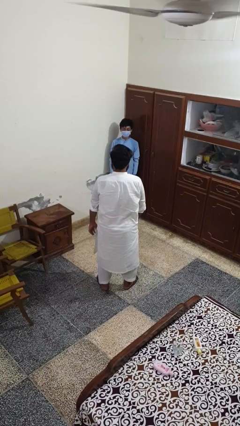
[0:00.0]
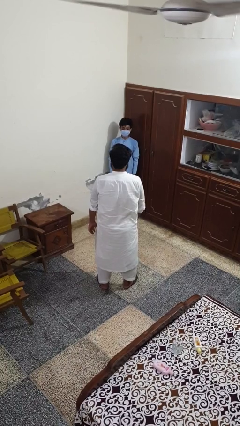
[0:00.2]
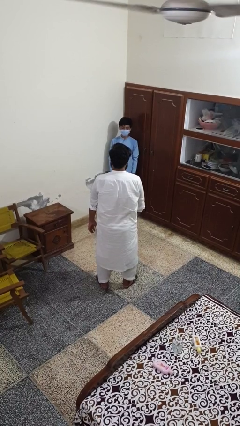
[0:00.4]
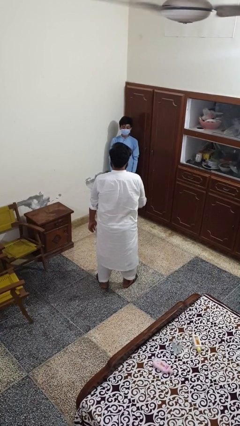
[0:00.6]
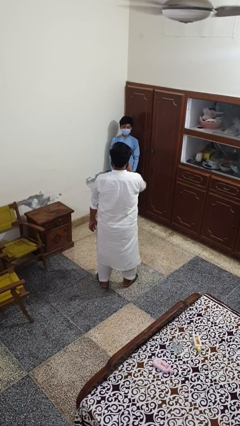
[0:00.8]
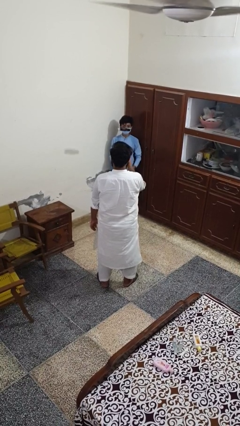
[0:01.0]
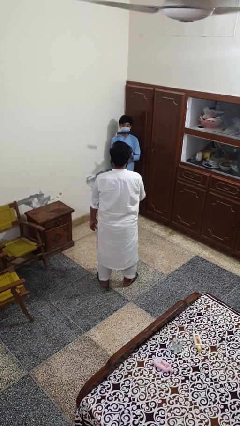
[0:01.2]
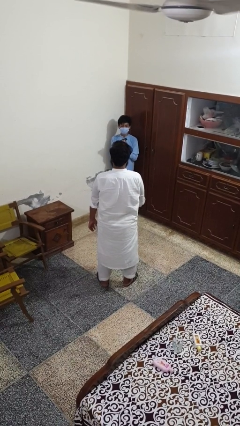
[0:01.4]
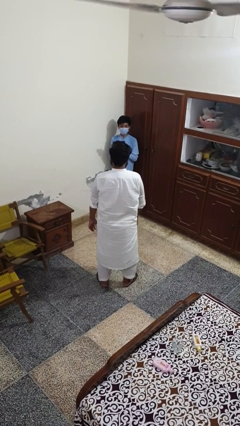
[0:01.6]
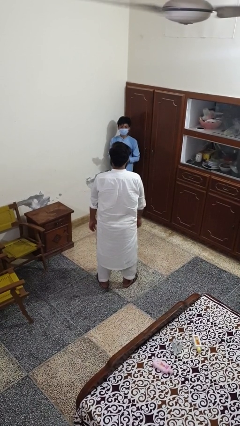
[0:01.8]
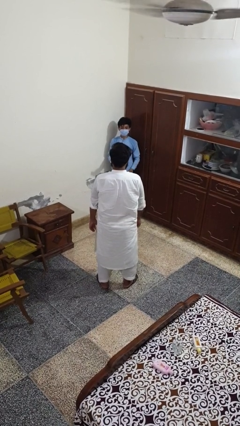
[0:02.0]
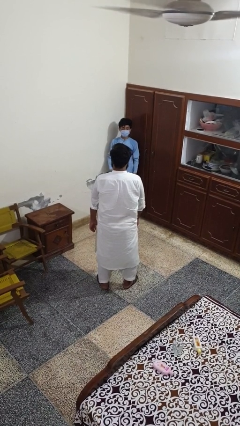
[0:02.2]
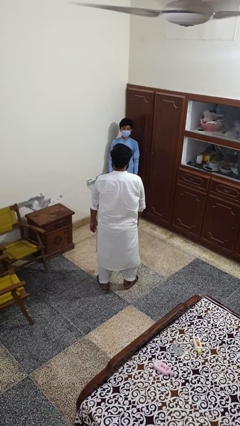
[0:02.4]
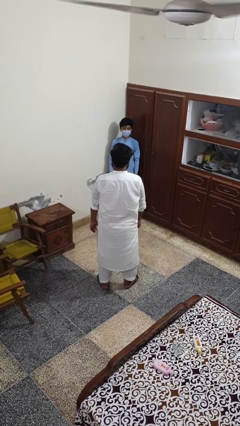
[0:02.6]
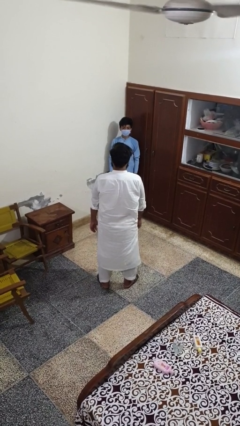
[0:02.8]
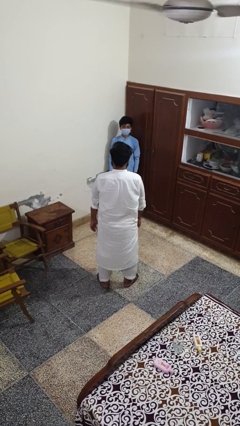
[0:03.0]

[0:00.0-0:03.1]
person throws object to person

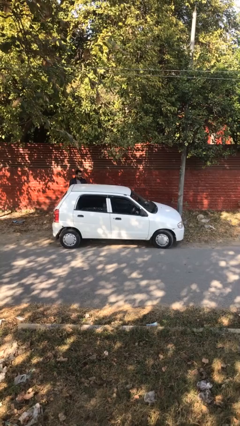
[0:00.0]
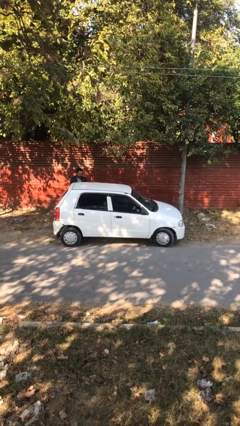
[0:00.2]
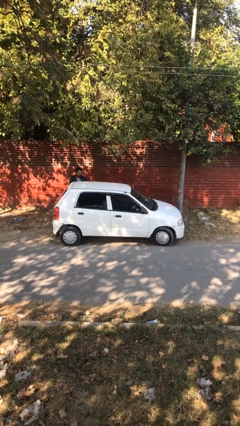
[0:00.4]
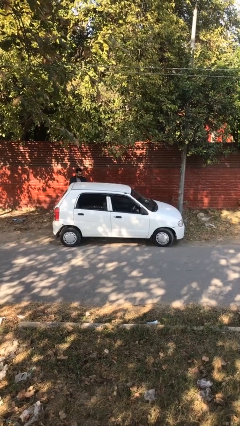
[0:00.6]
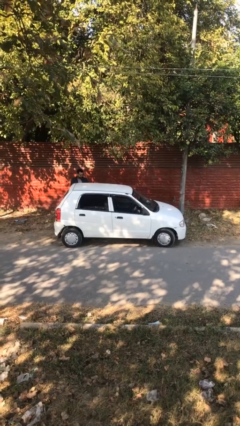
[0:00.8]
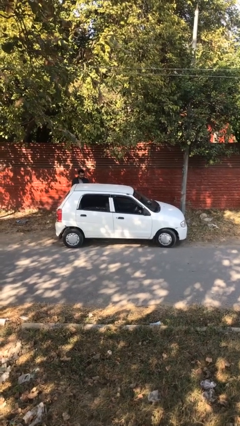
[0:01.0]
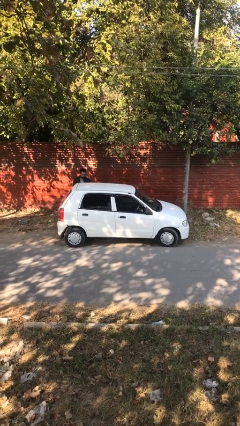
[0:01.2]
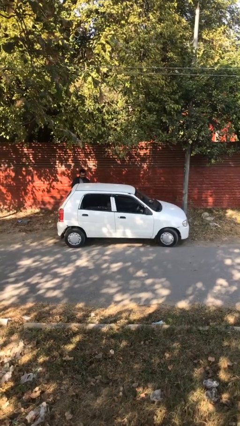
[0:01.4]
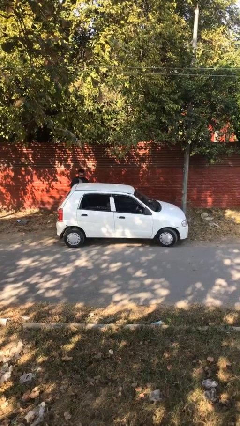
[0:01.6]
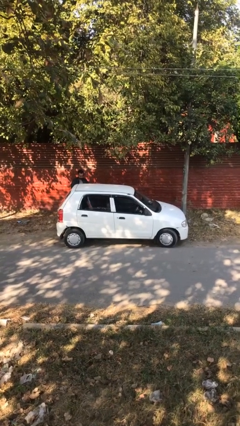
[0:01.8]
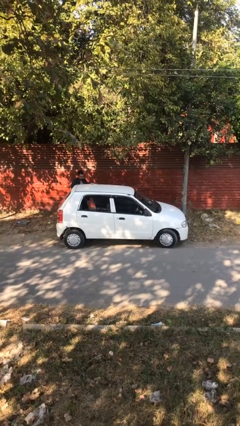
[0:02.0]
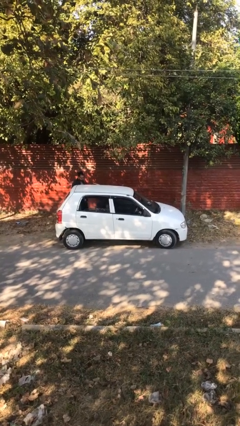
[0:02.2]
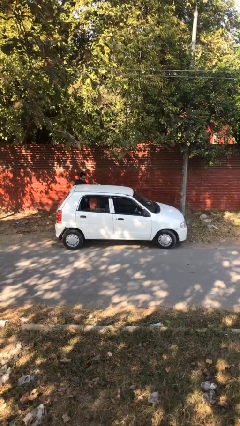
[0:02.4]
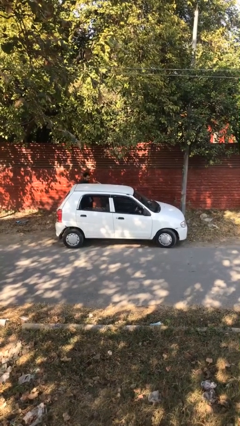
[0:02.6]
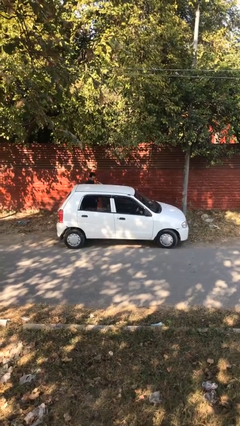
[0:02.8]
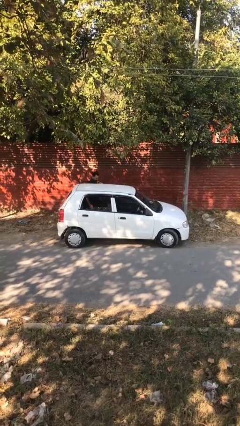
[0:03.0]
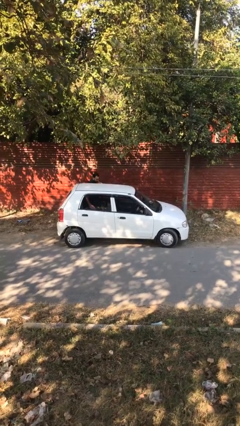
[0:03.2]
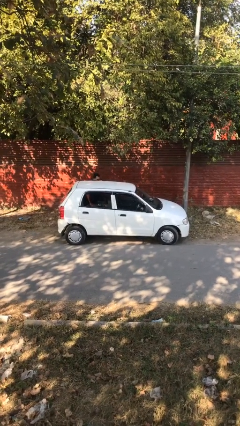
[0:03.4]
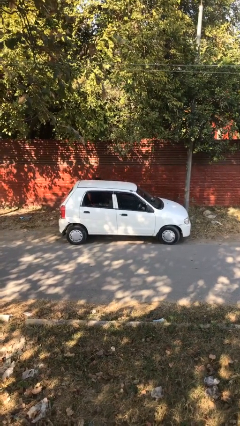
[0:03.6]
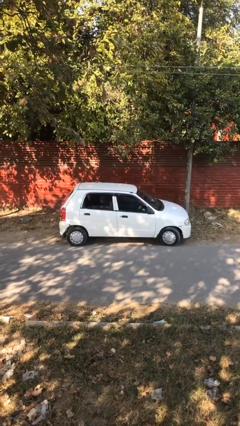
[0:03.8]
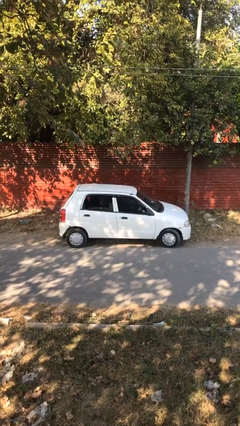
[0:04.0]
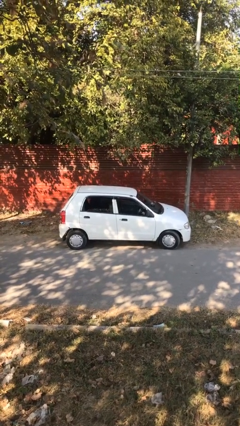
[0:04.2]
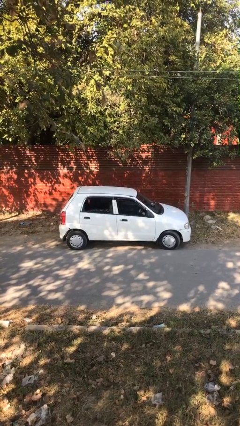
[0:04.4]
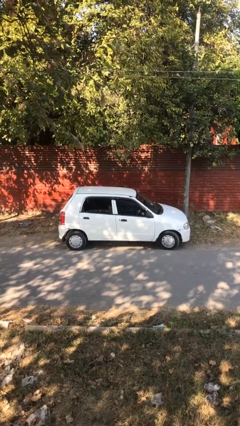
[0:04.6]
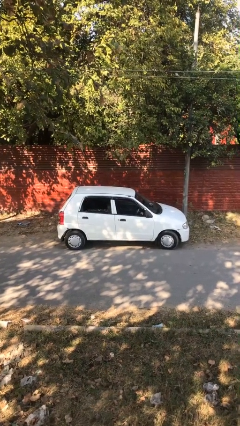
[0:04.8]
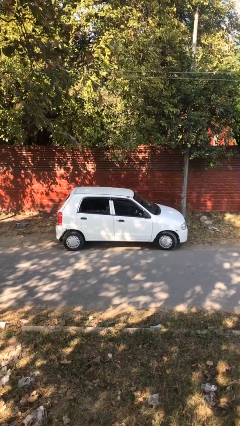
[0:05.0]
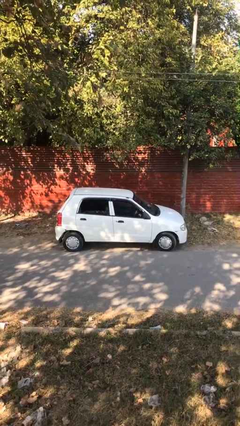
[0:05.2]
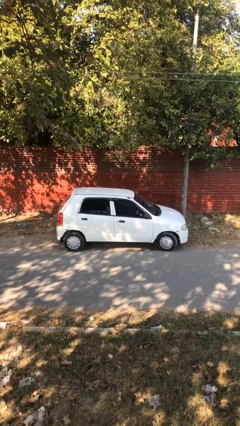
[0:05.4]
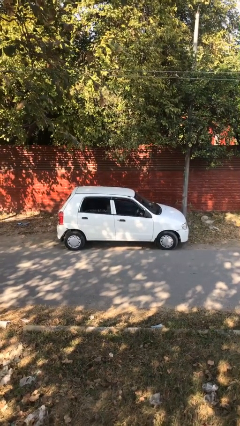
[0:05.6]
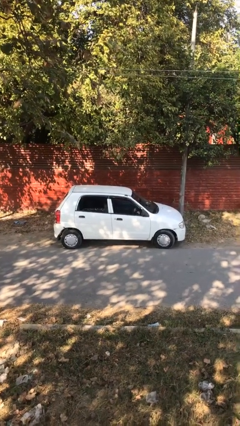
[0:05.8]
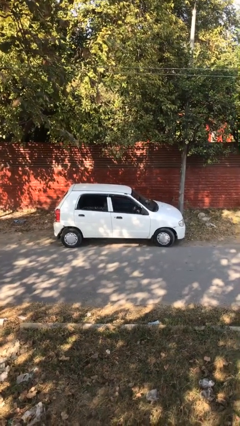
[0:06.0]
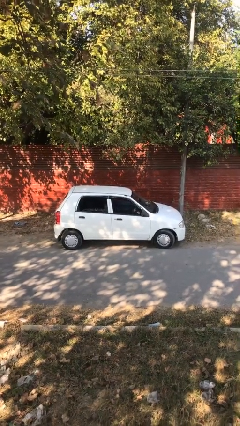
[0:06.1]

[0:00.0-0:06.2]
car picks up person

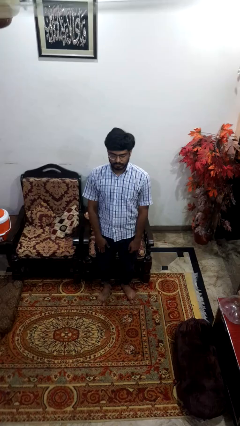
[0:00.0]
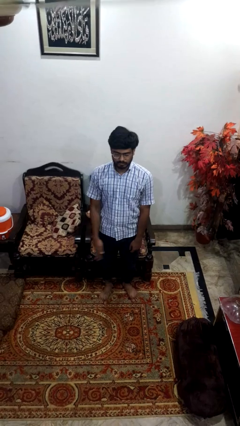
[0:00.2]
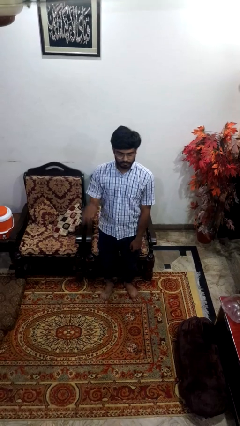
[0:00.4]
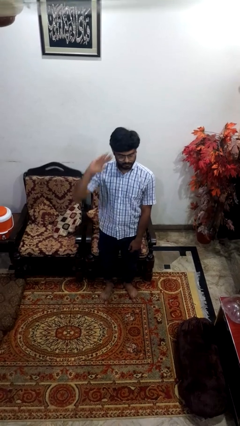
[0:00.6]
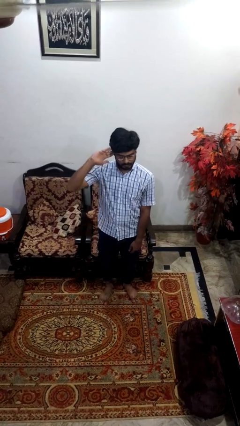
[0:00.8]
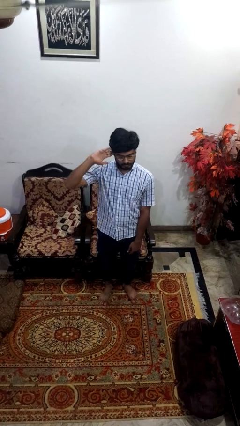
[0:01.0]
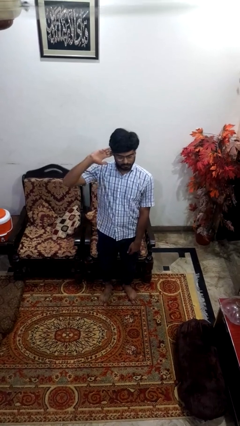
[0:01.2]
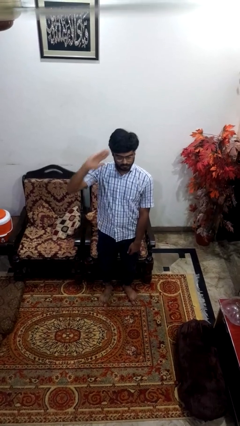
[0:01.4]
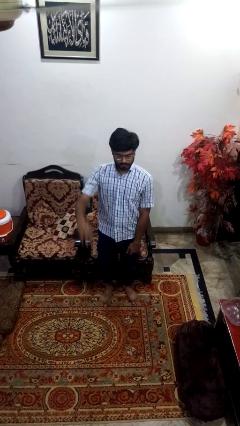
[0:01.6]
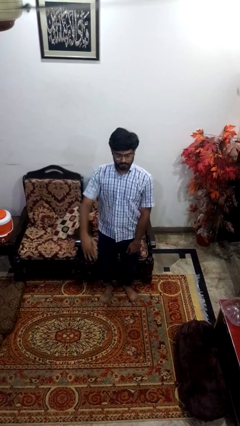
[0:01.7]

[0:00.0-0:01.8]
person salutes

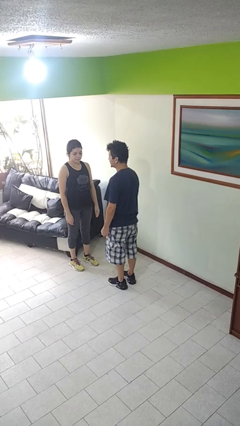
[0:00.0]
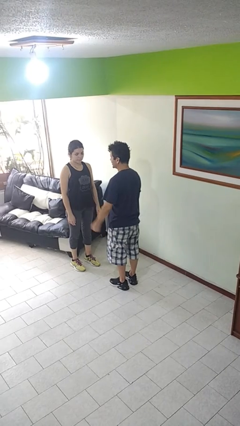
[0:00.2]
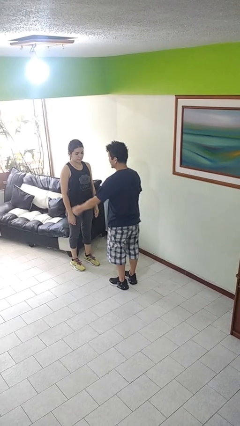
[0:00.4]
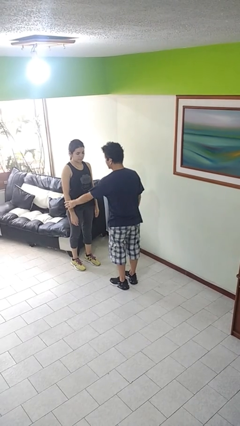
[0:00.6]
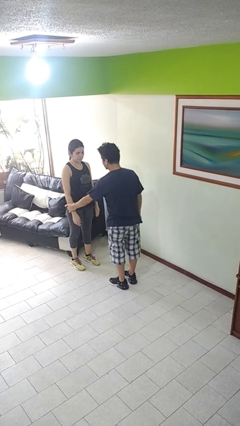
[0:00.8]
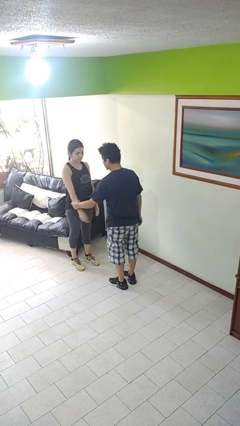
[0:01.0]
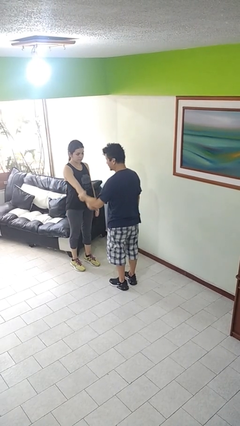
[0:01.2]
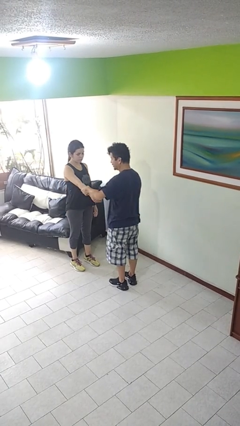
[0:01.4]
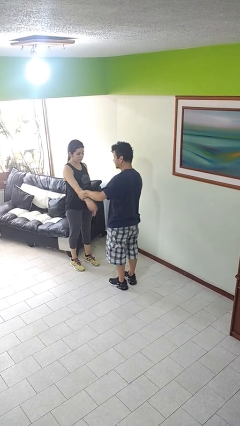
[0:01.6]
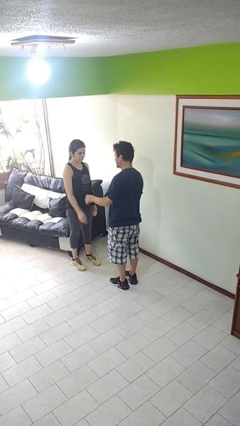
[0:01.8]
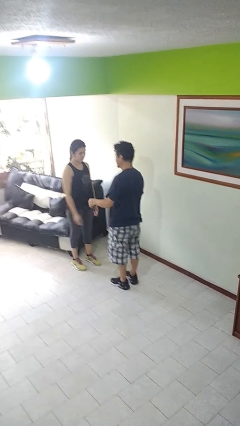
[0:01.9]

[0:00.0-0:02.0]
person grabs person by forearm

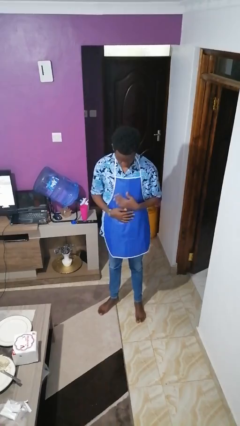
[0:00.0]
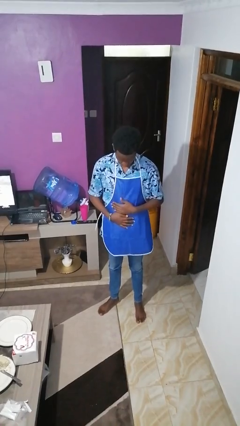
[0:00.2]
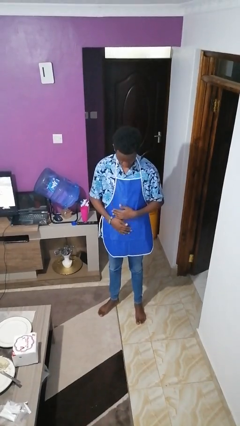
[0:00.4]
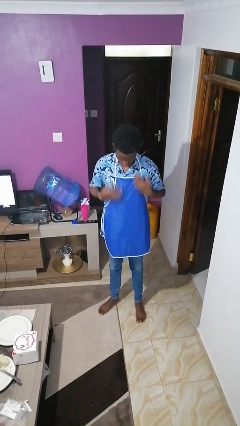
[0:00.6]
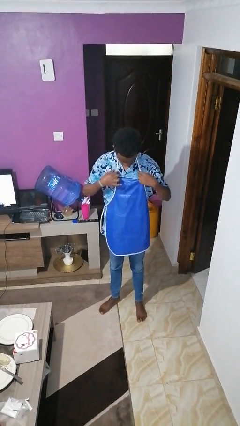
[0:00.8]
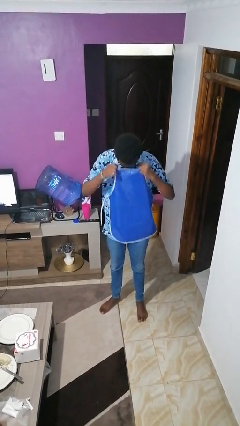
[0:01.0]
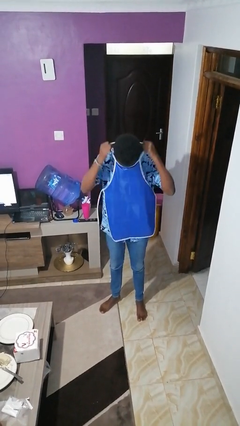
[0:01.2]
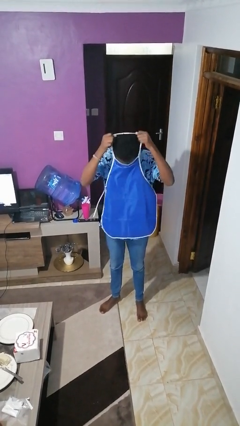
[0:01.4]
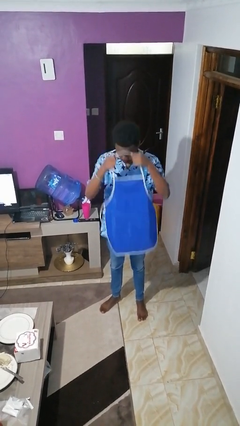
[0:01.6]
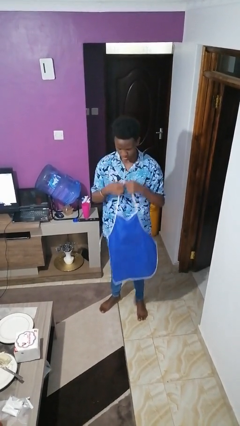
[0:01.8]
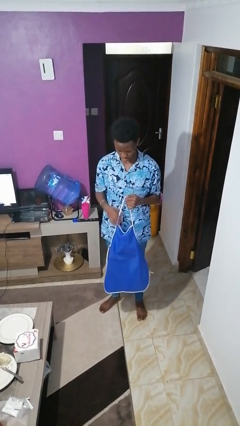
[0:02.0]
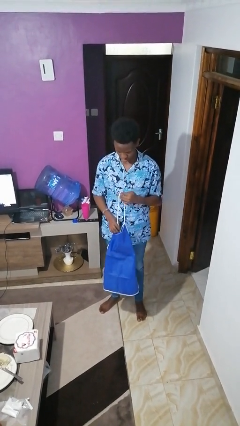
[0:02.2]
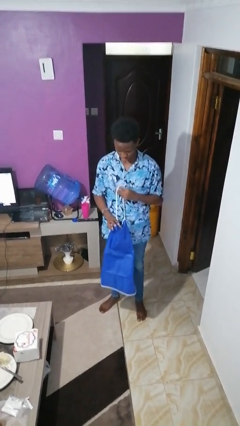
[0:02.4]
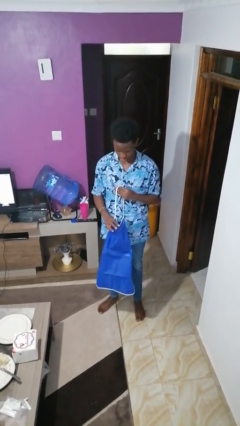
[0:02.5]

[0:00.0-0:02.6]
person takes off apron

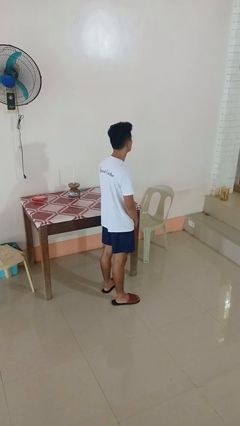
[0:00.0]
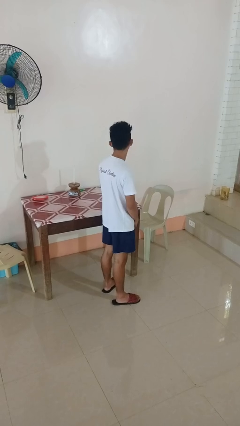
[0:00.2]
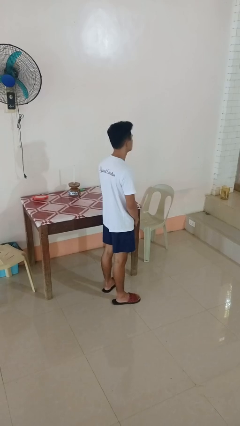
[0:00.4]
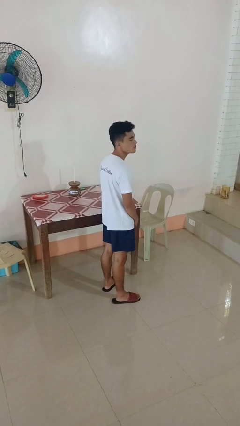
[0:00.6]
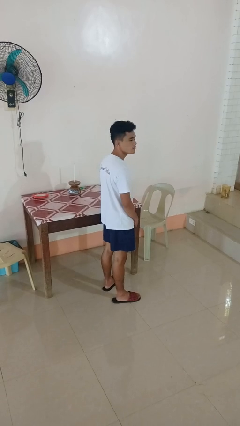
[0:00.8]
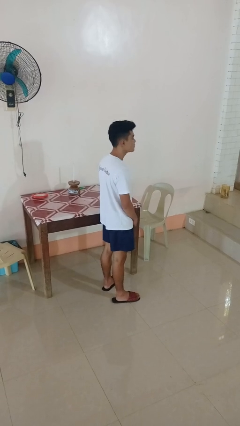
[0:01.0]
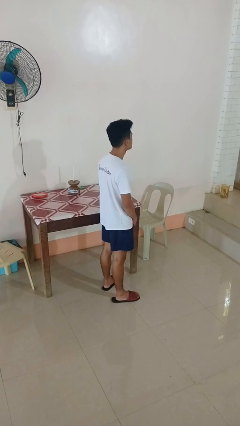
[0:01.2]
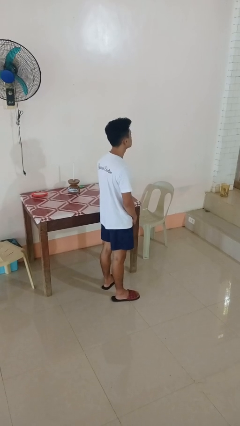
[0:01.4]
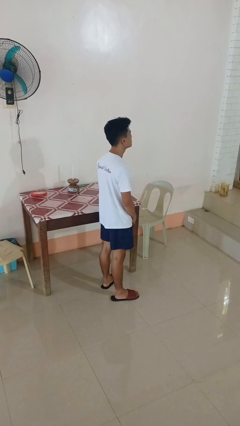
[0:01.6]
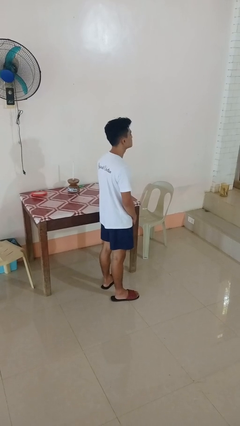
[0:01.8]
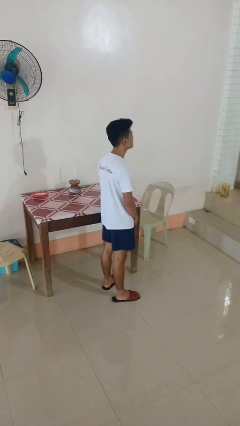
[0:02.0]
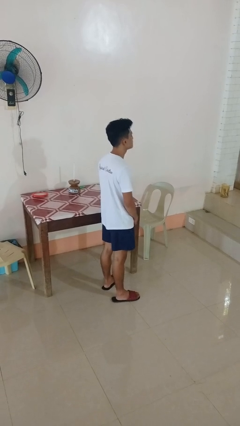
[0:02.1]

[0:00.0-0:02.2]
person shakes head
